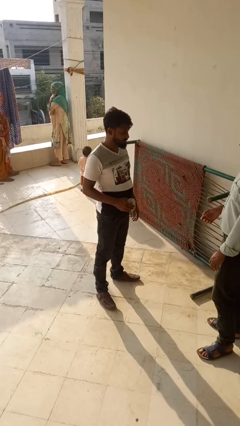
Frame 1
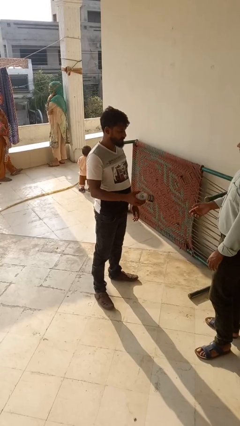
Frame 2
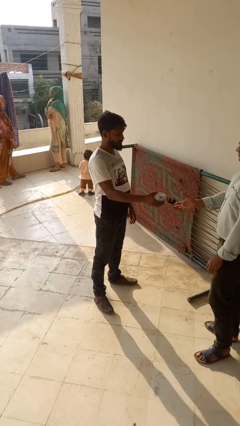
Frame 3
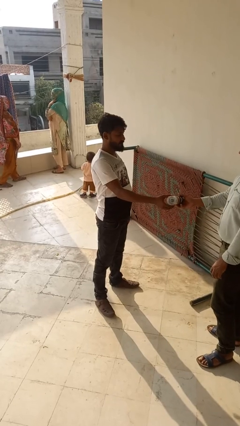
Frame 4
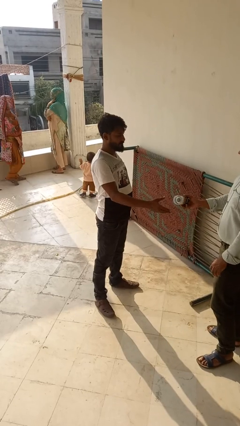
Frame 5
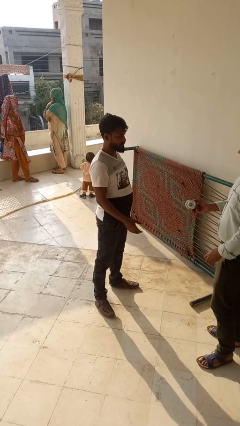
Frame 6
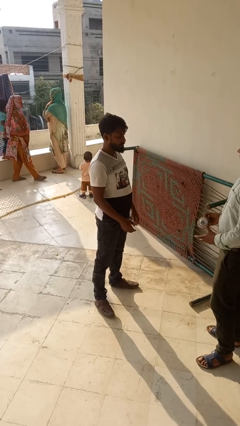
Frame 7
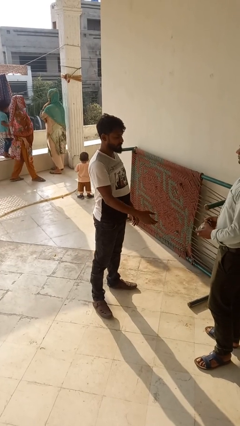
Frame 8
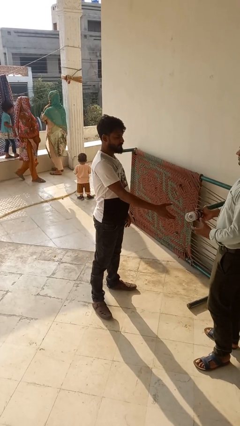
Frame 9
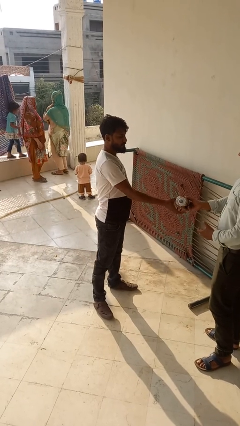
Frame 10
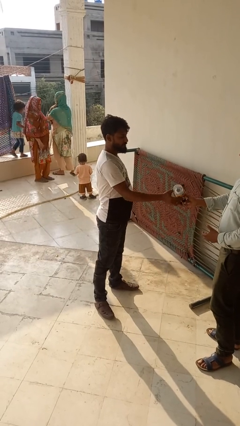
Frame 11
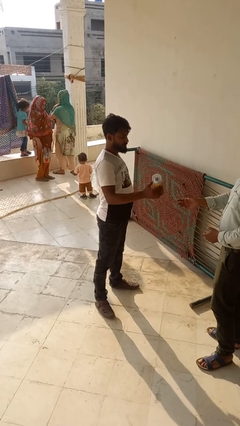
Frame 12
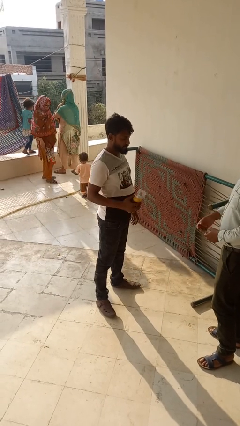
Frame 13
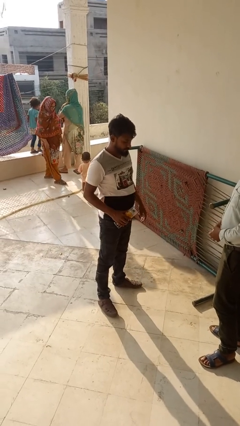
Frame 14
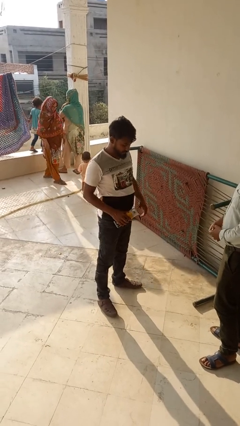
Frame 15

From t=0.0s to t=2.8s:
person transfers object to person

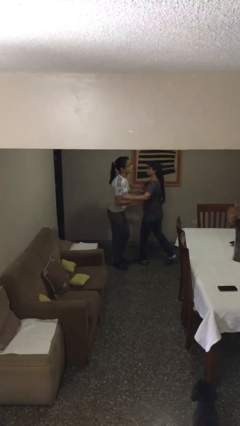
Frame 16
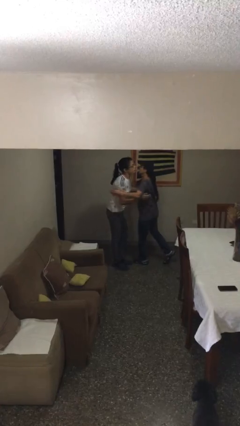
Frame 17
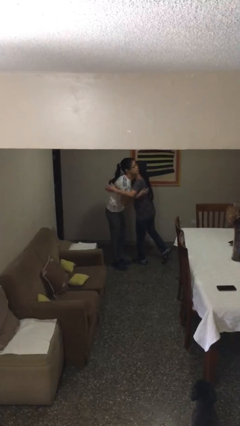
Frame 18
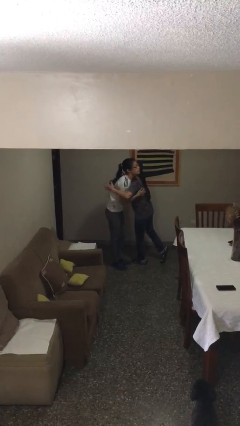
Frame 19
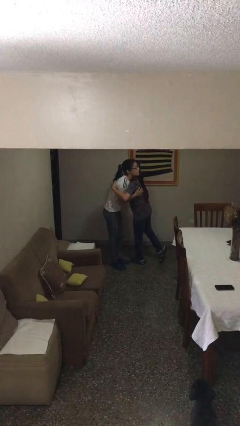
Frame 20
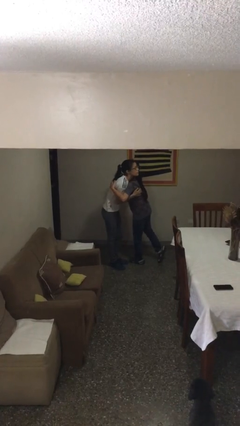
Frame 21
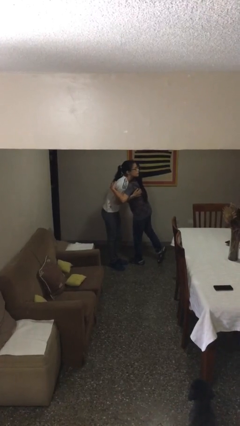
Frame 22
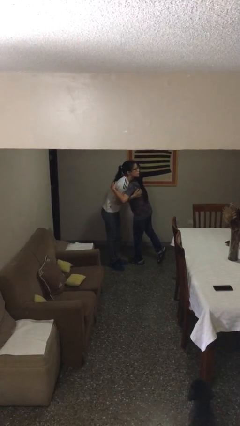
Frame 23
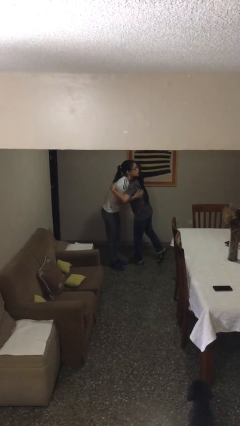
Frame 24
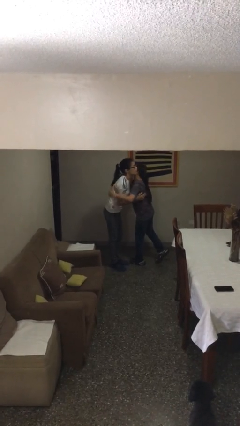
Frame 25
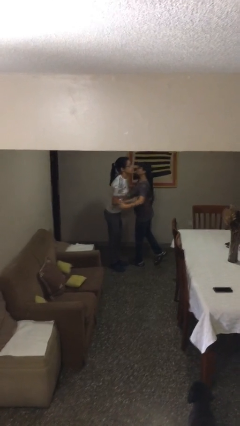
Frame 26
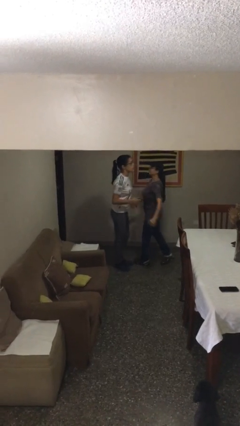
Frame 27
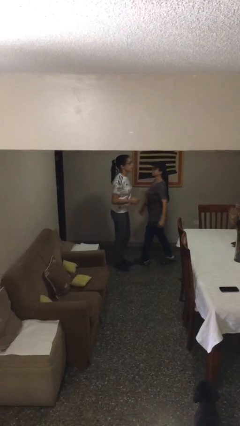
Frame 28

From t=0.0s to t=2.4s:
person embraces person

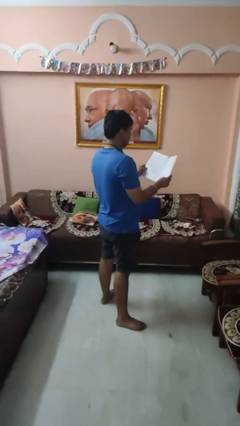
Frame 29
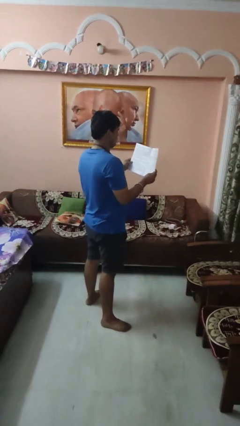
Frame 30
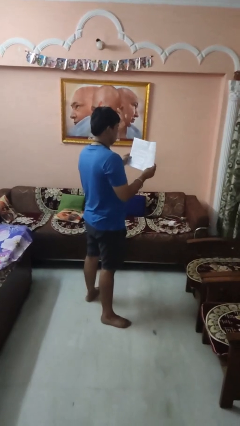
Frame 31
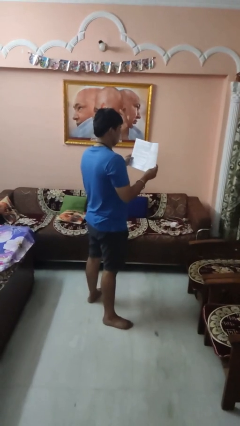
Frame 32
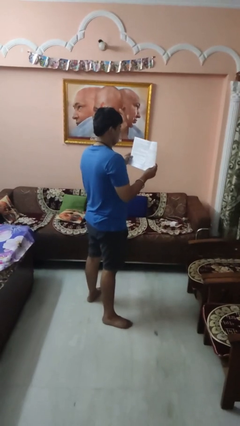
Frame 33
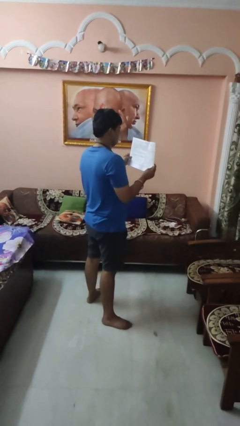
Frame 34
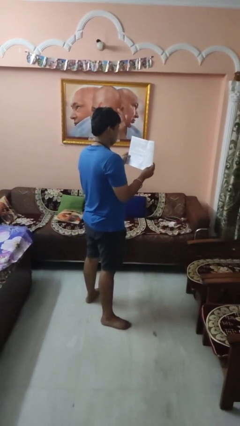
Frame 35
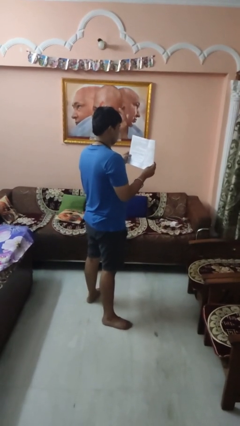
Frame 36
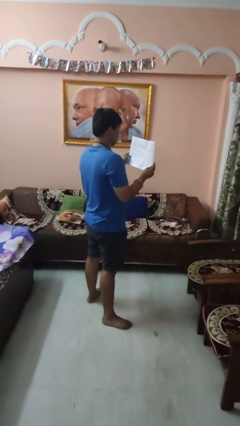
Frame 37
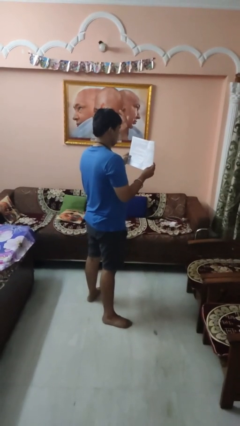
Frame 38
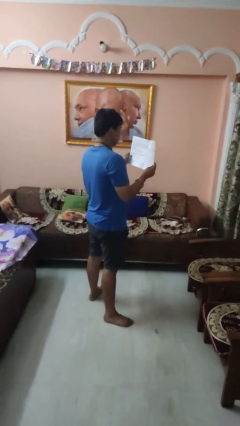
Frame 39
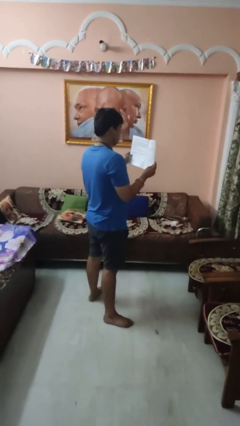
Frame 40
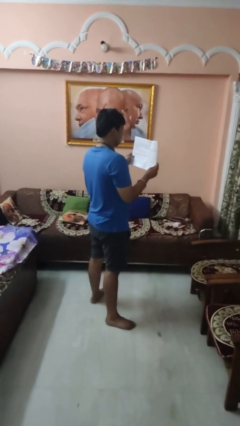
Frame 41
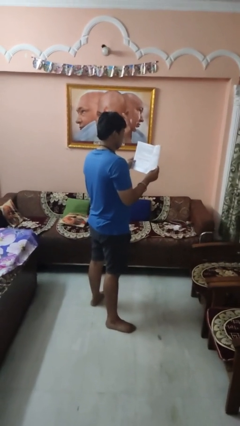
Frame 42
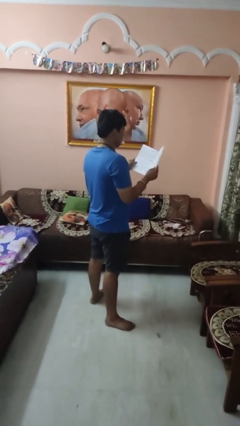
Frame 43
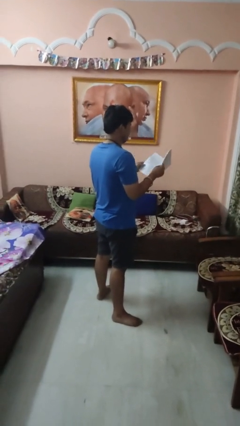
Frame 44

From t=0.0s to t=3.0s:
person reads magazine

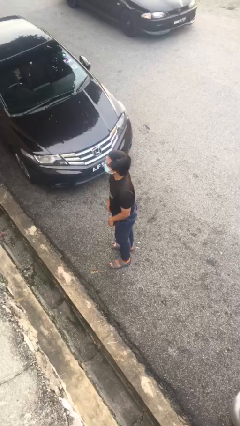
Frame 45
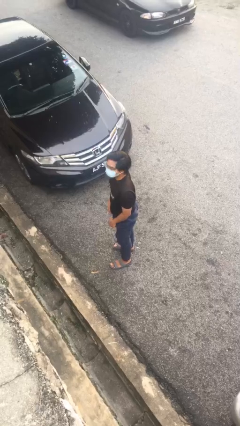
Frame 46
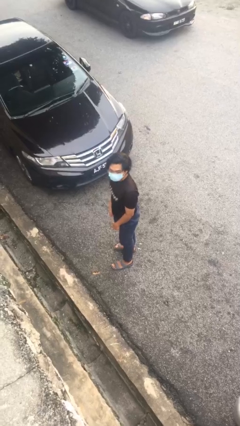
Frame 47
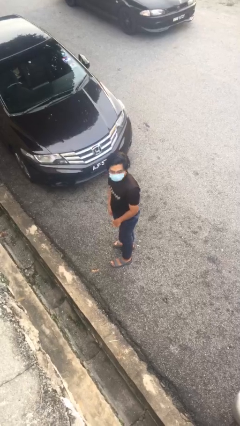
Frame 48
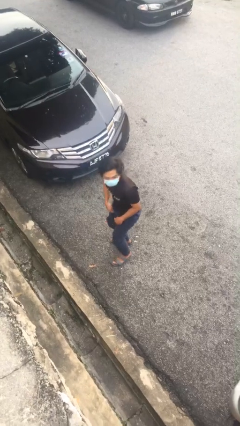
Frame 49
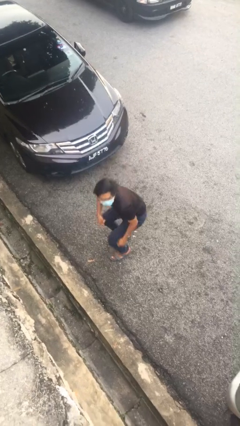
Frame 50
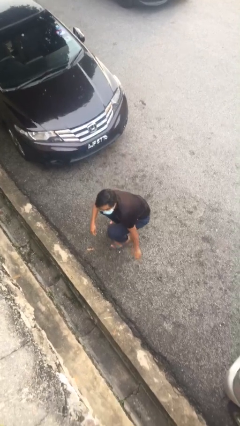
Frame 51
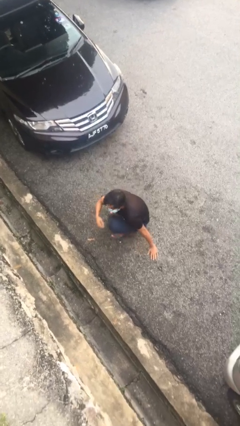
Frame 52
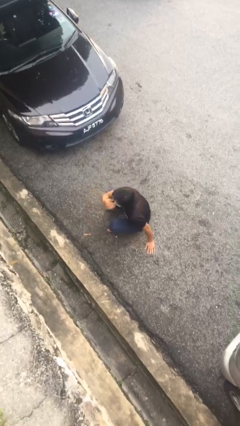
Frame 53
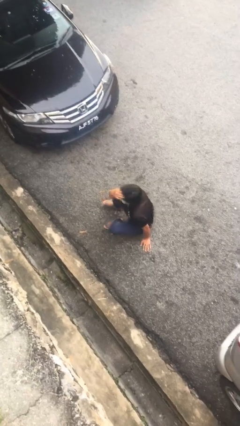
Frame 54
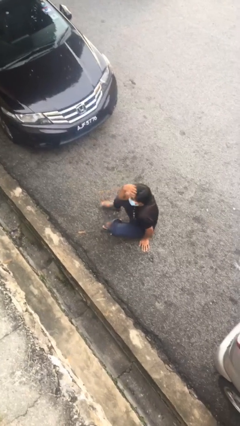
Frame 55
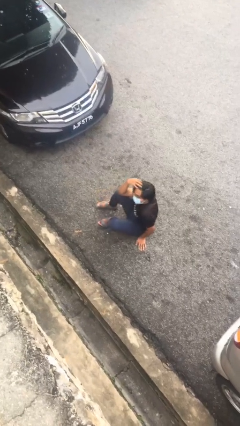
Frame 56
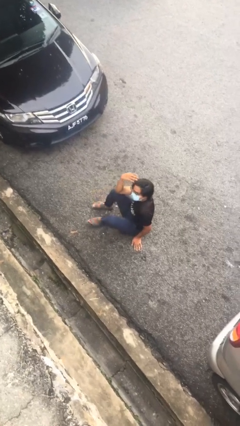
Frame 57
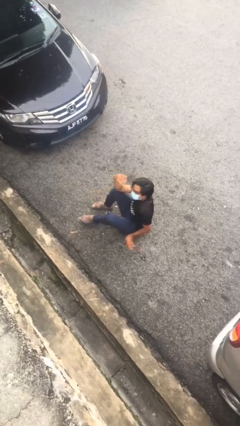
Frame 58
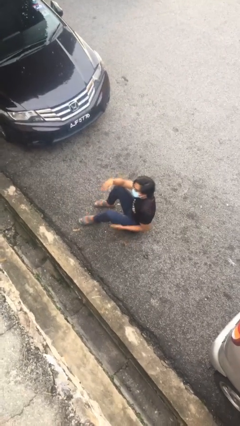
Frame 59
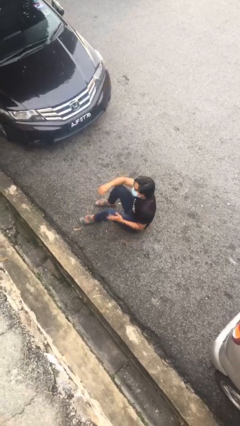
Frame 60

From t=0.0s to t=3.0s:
person sits down

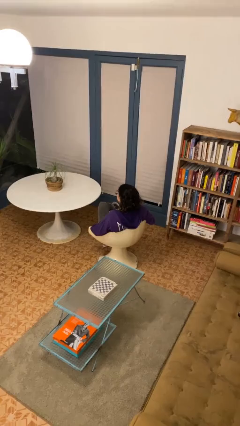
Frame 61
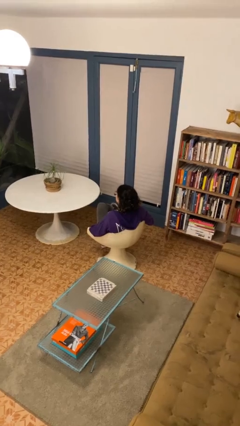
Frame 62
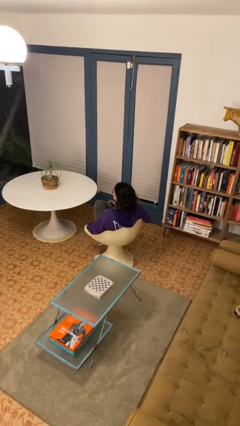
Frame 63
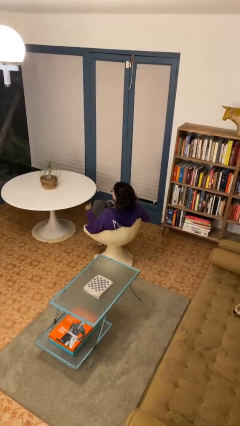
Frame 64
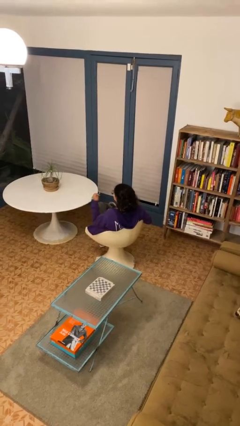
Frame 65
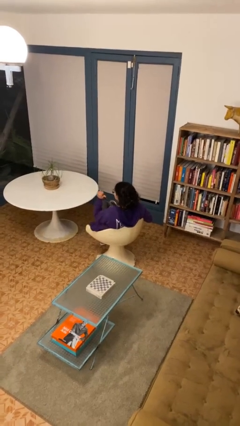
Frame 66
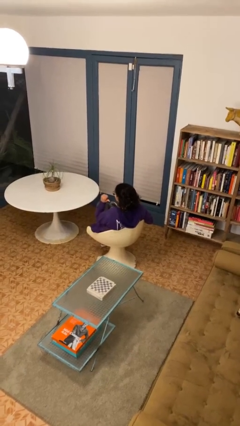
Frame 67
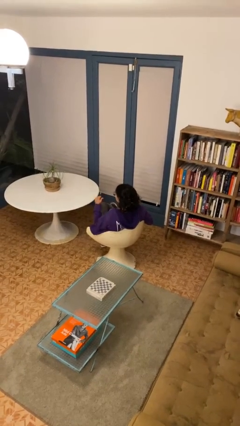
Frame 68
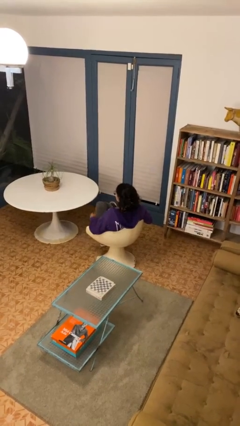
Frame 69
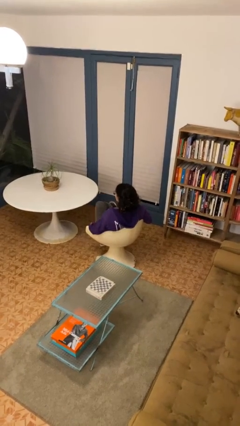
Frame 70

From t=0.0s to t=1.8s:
person gestures behind me

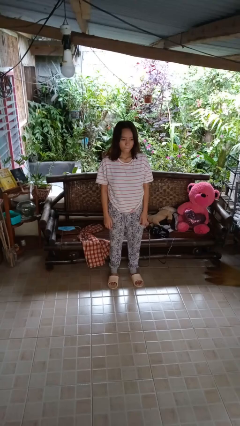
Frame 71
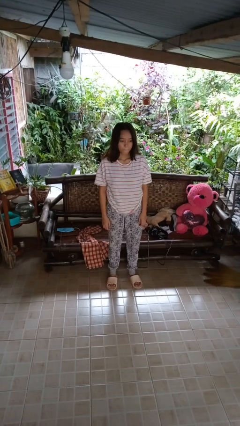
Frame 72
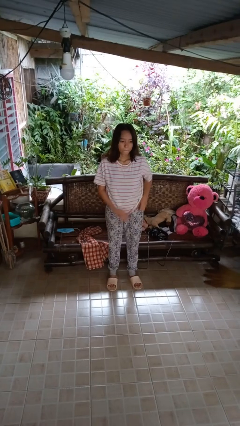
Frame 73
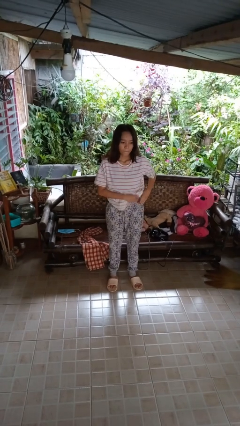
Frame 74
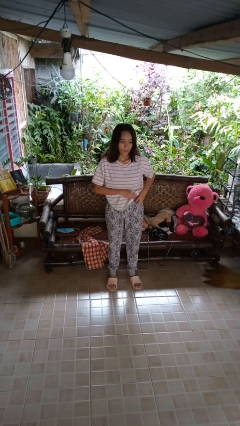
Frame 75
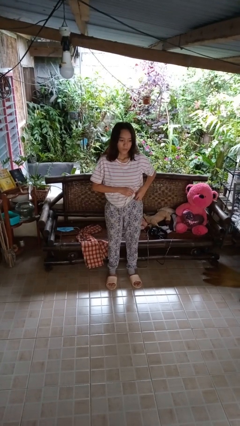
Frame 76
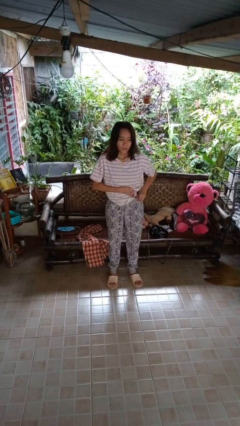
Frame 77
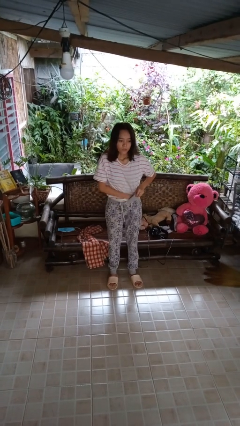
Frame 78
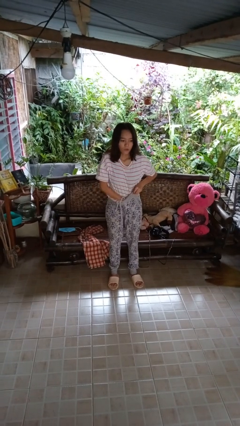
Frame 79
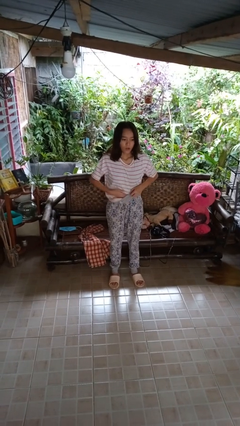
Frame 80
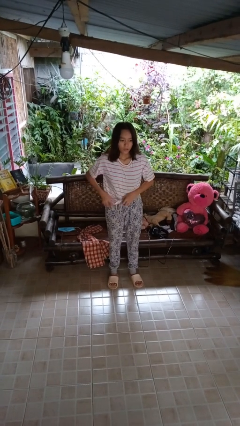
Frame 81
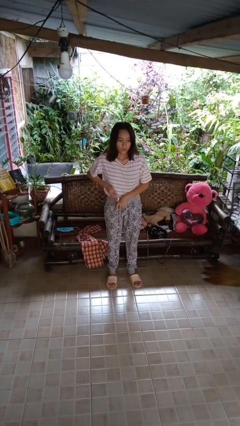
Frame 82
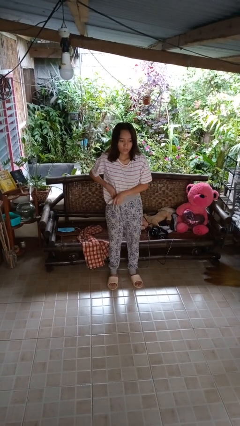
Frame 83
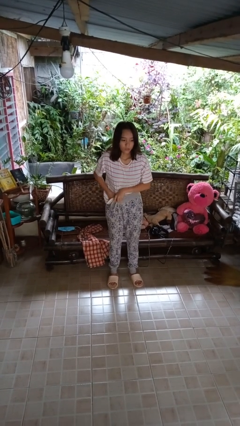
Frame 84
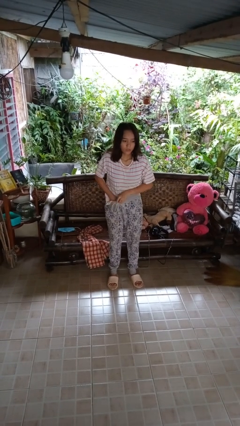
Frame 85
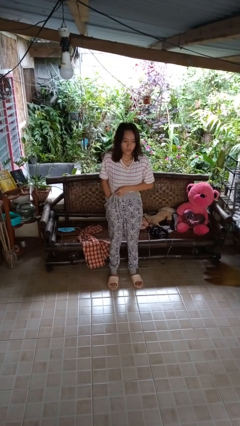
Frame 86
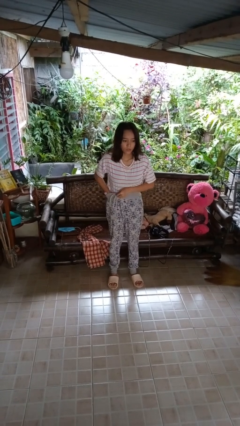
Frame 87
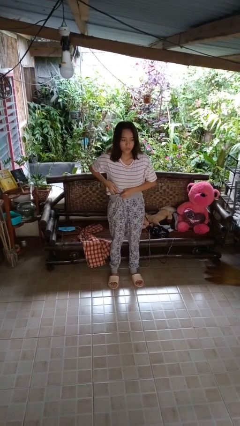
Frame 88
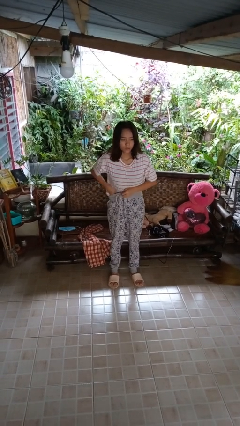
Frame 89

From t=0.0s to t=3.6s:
person tucks in shirt

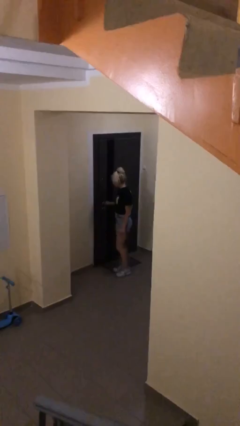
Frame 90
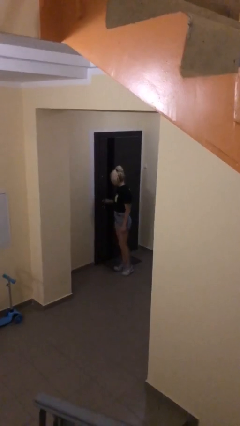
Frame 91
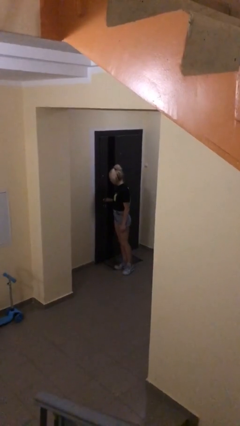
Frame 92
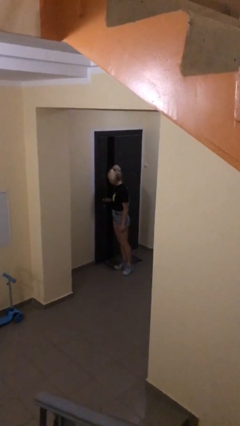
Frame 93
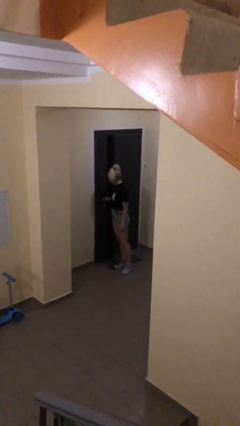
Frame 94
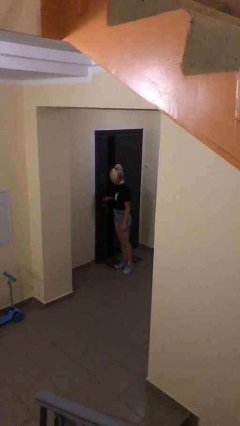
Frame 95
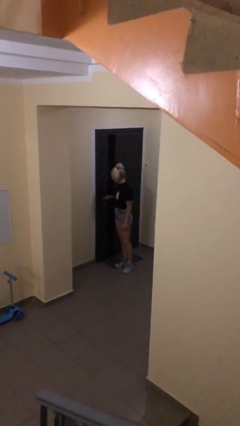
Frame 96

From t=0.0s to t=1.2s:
person closes facility door
